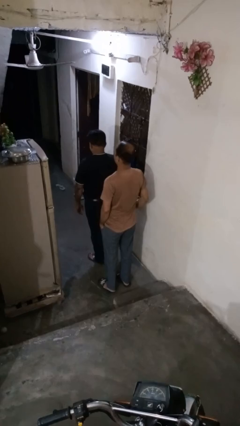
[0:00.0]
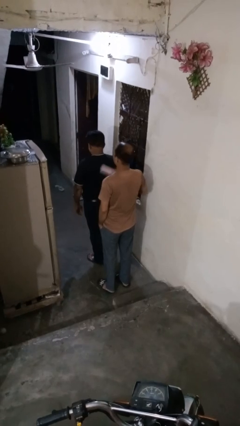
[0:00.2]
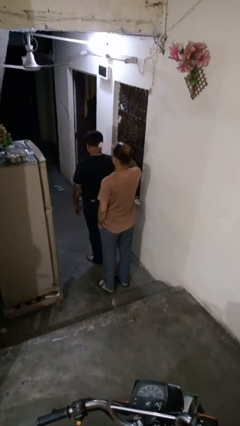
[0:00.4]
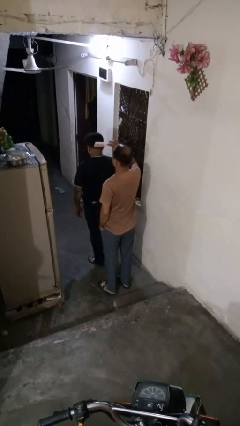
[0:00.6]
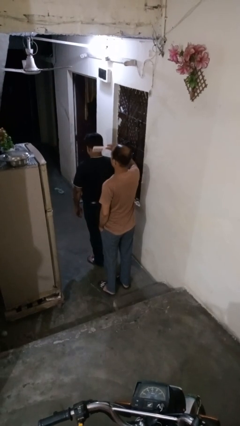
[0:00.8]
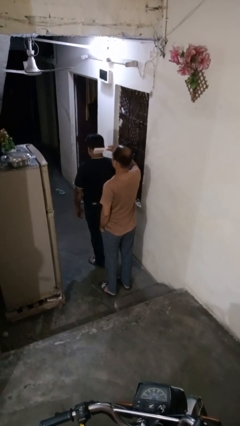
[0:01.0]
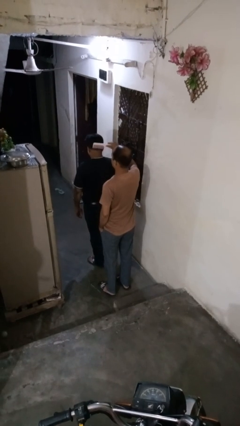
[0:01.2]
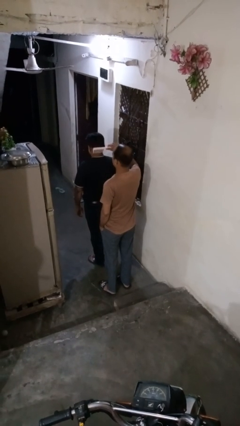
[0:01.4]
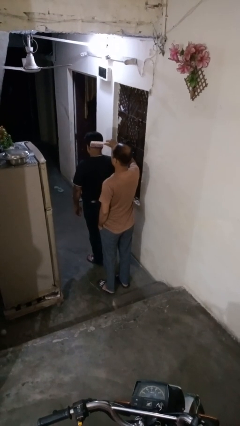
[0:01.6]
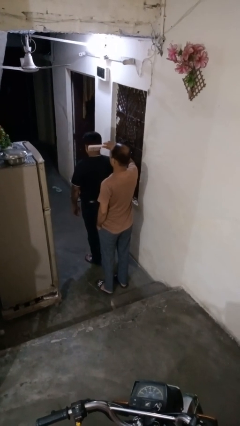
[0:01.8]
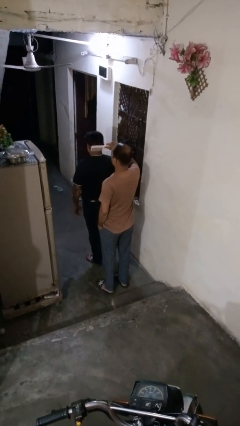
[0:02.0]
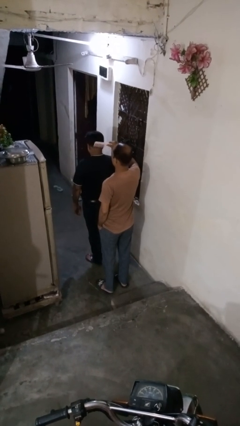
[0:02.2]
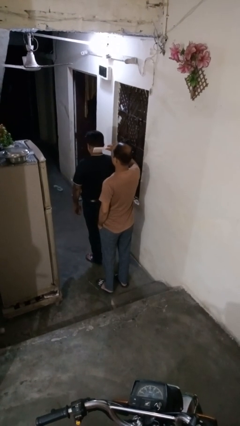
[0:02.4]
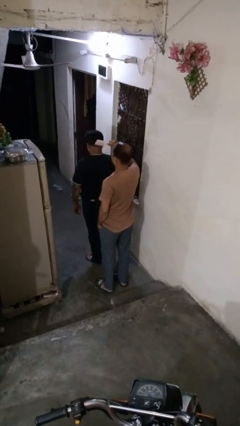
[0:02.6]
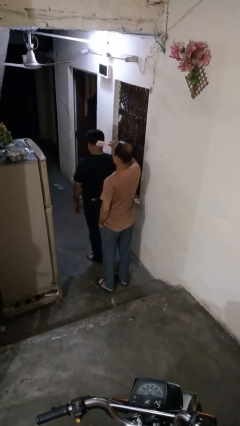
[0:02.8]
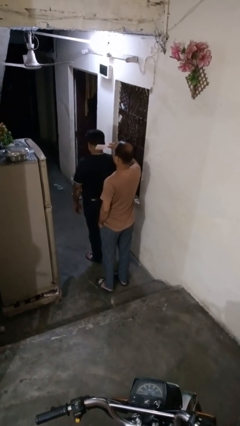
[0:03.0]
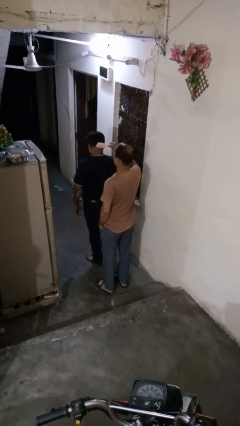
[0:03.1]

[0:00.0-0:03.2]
person brushes hair of person

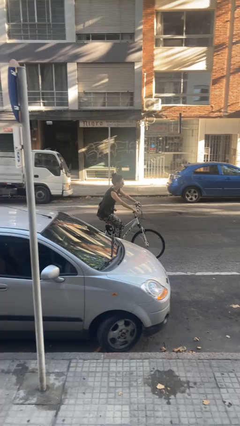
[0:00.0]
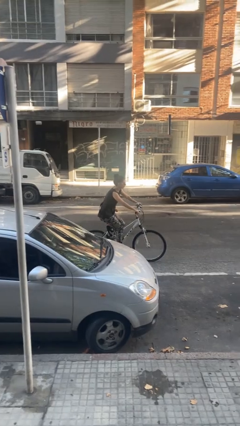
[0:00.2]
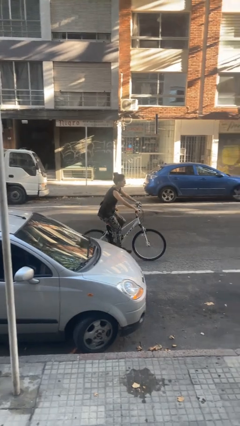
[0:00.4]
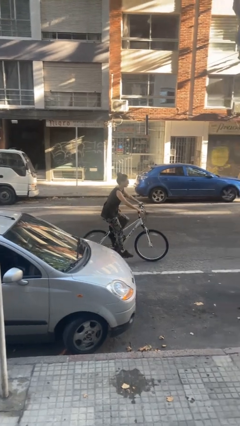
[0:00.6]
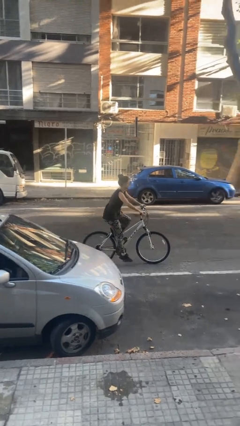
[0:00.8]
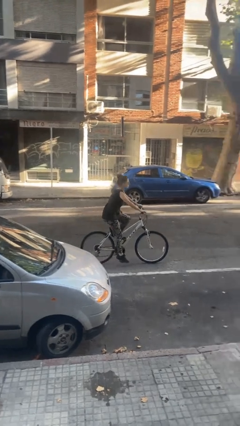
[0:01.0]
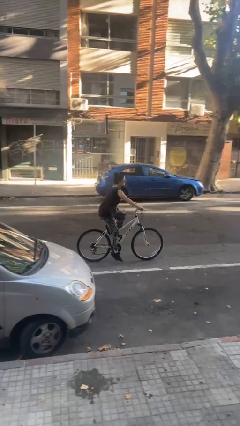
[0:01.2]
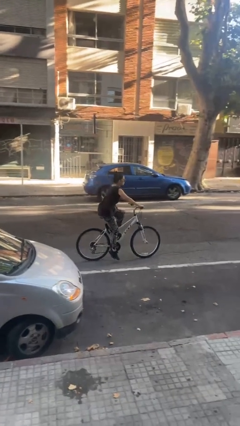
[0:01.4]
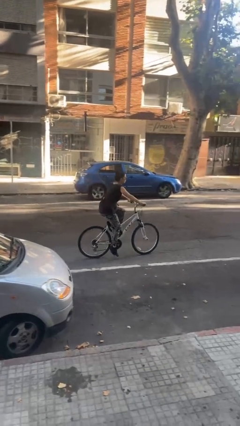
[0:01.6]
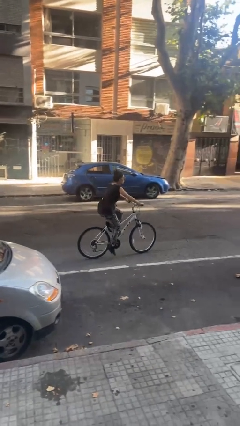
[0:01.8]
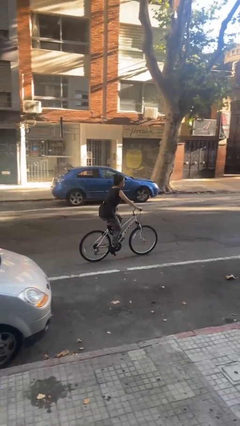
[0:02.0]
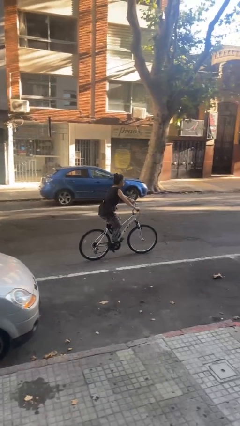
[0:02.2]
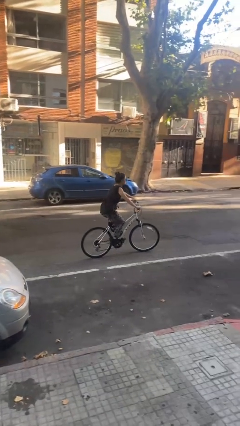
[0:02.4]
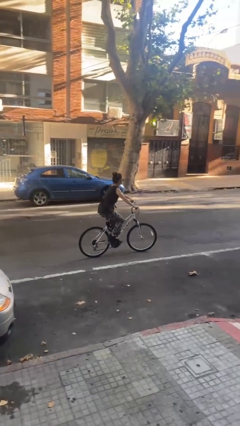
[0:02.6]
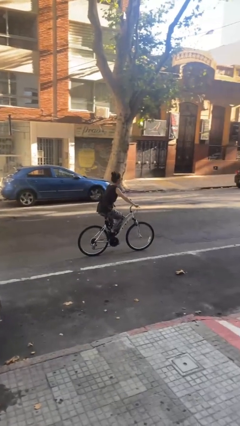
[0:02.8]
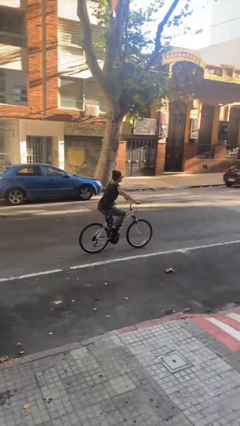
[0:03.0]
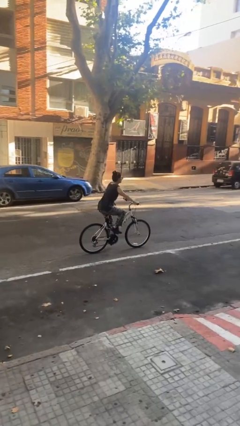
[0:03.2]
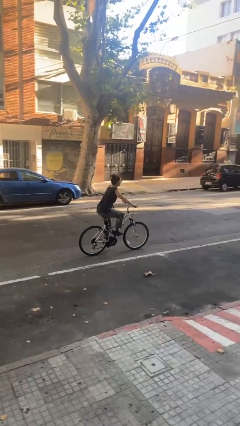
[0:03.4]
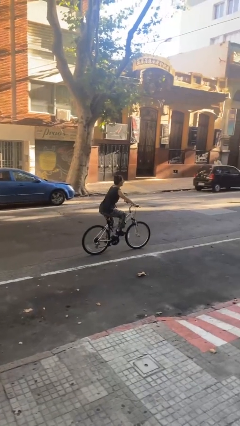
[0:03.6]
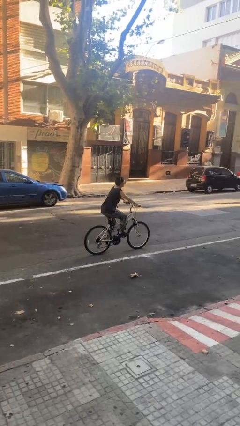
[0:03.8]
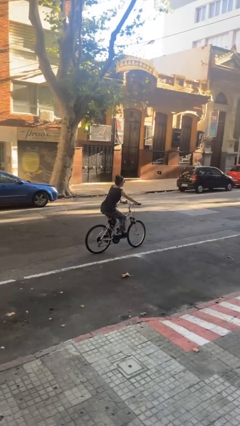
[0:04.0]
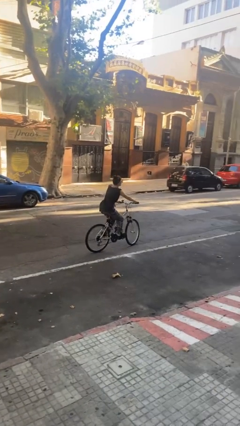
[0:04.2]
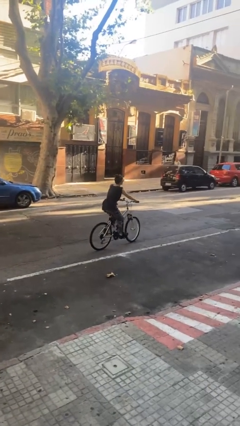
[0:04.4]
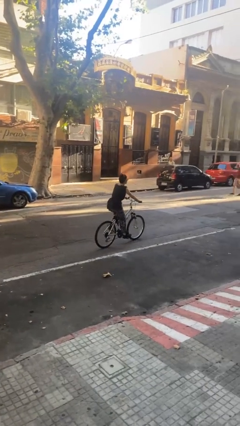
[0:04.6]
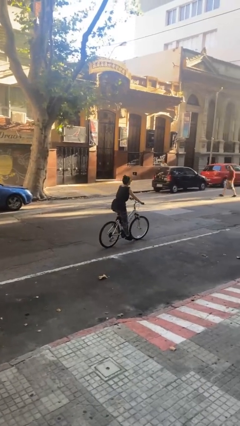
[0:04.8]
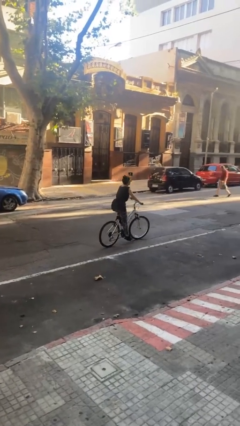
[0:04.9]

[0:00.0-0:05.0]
person rides bicycle

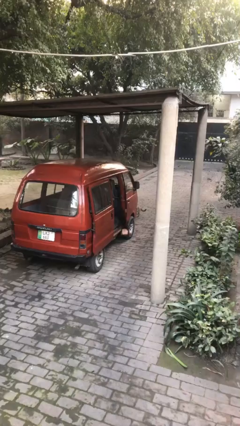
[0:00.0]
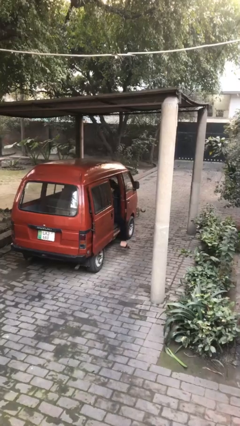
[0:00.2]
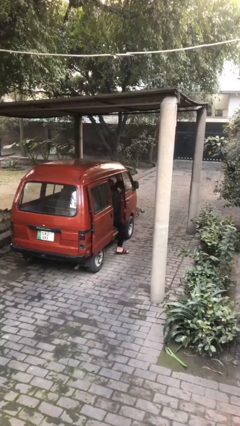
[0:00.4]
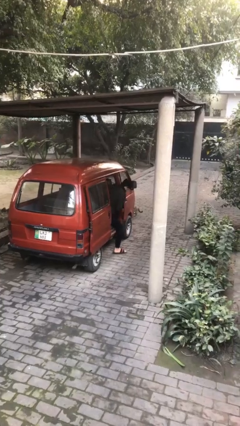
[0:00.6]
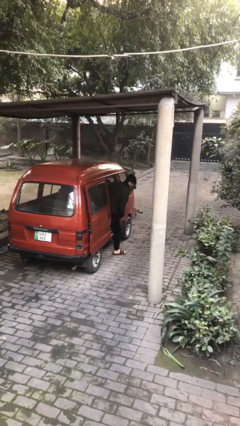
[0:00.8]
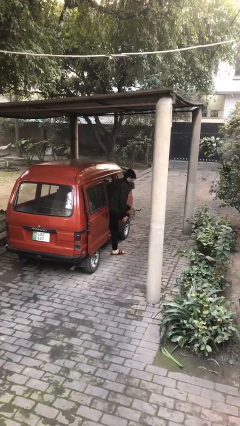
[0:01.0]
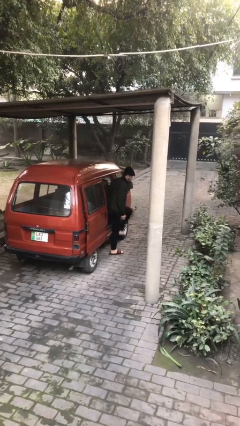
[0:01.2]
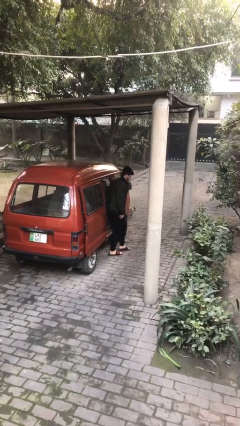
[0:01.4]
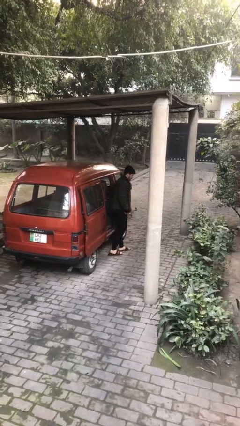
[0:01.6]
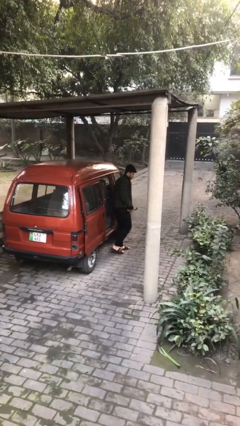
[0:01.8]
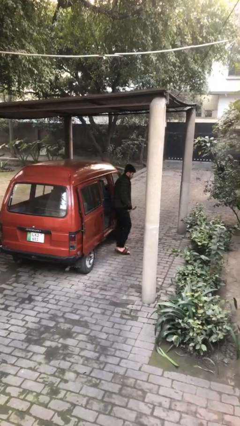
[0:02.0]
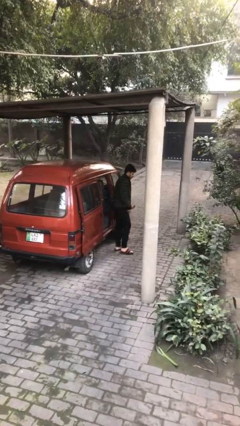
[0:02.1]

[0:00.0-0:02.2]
person exits car

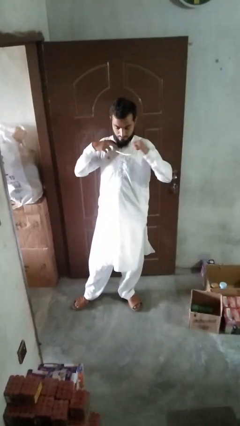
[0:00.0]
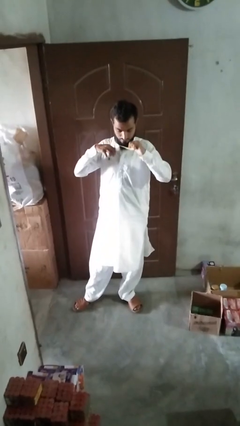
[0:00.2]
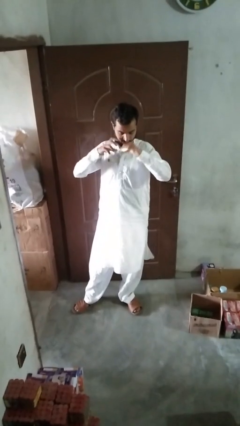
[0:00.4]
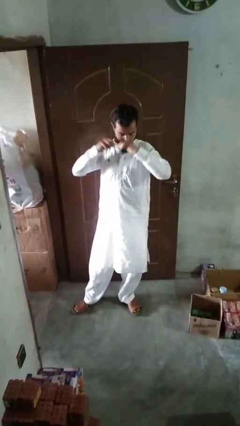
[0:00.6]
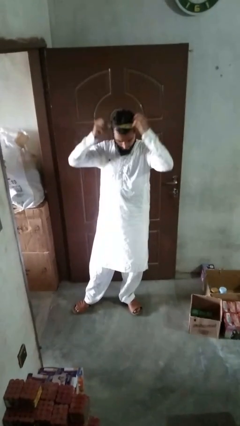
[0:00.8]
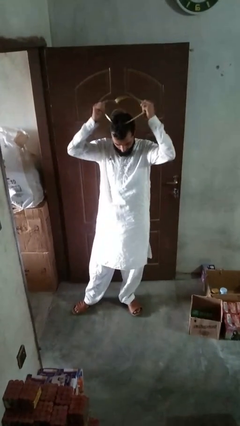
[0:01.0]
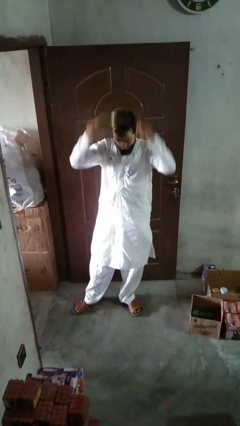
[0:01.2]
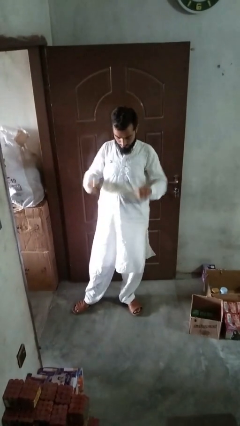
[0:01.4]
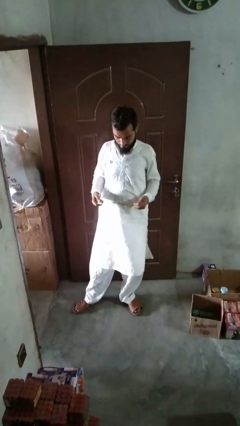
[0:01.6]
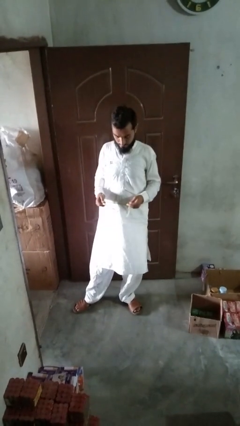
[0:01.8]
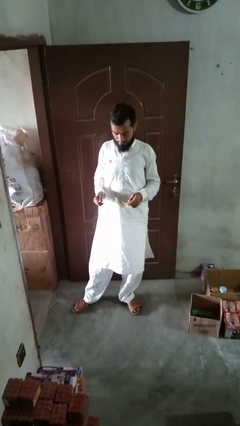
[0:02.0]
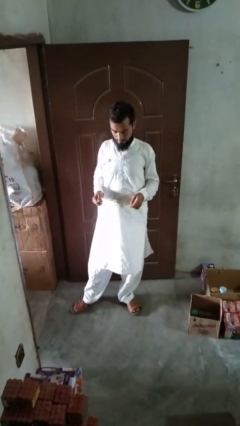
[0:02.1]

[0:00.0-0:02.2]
person takes off necklace

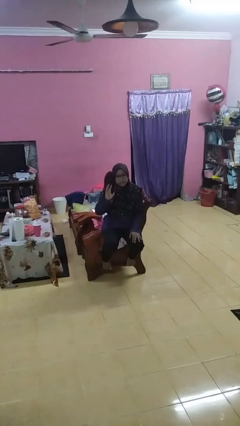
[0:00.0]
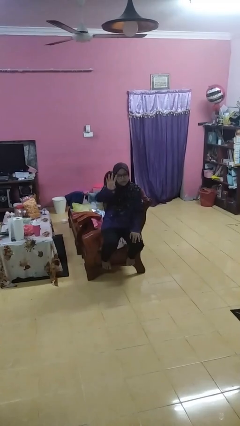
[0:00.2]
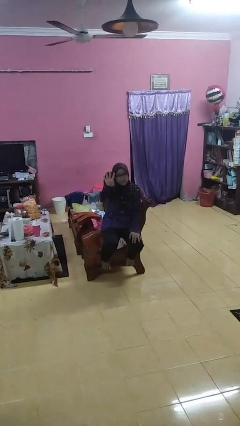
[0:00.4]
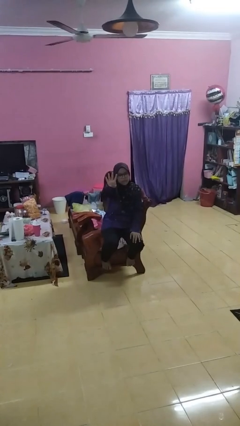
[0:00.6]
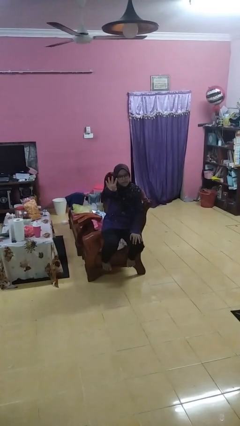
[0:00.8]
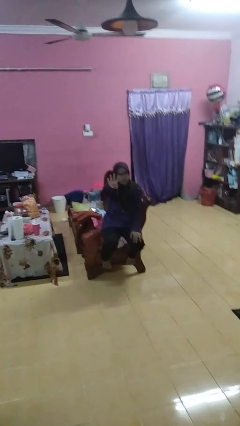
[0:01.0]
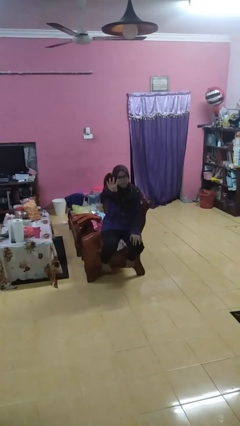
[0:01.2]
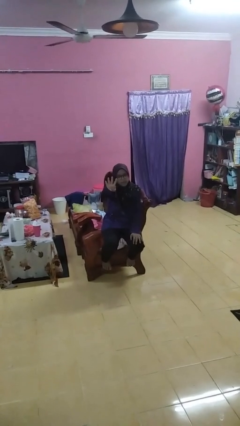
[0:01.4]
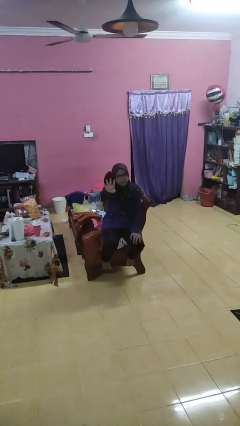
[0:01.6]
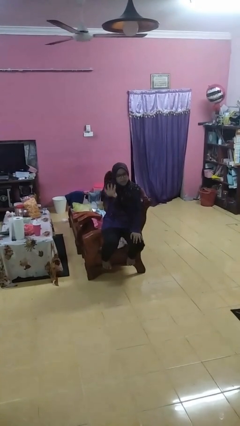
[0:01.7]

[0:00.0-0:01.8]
person gestures number four

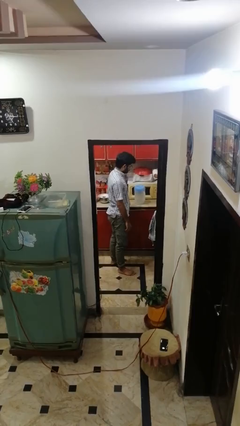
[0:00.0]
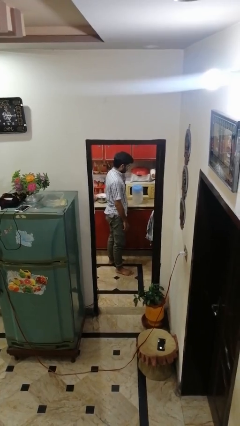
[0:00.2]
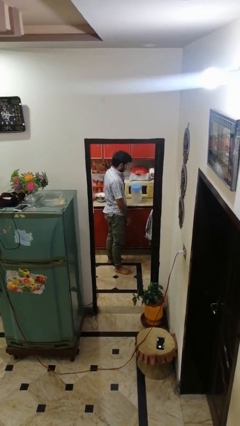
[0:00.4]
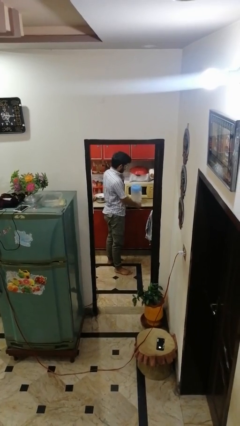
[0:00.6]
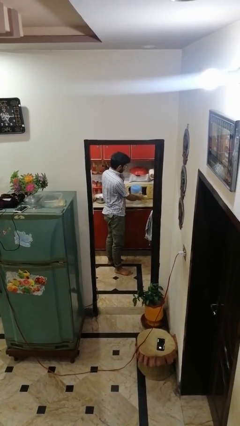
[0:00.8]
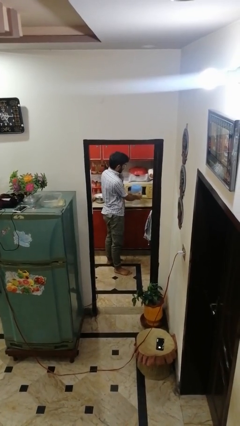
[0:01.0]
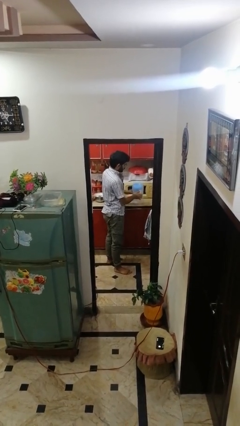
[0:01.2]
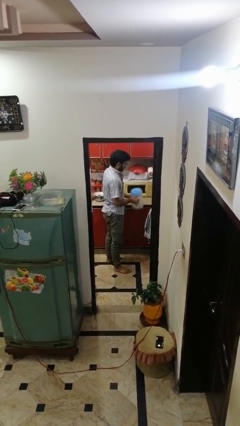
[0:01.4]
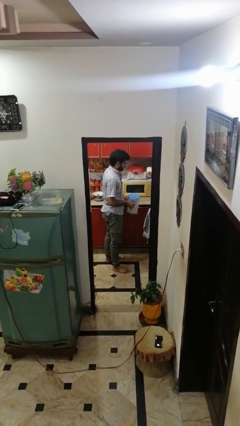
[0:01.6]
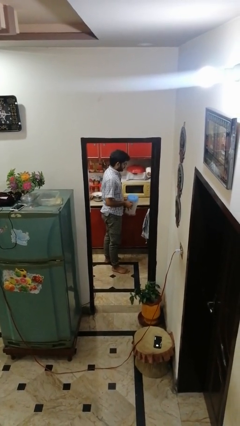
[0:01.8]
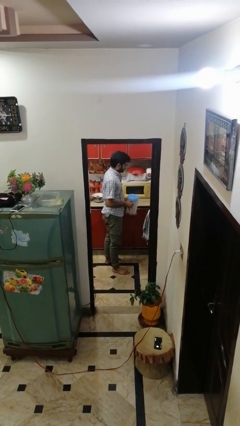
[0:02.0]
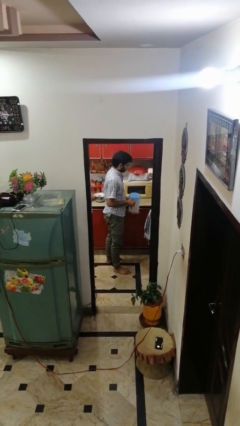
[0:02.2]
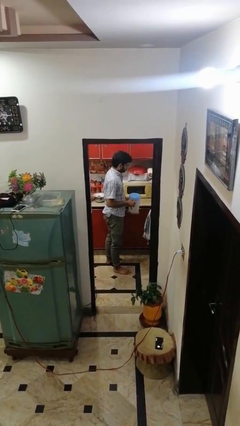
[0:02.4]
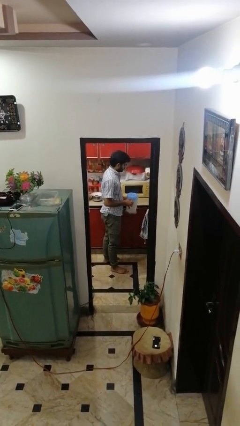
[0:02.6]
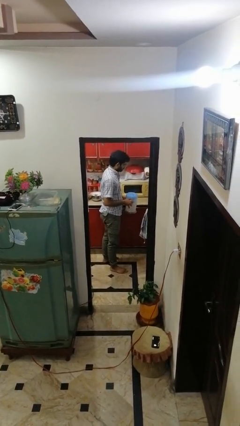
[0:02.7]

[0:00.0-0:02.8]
person picks up object from countertop
